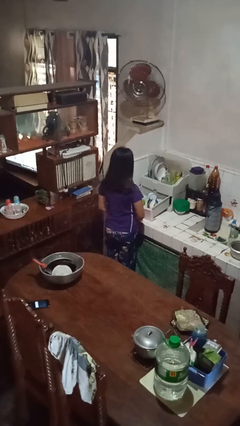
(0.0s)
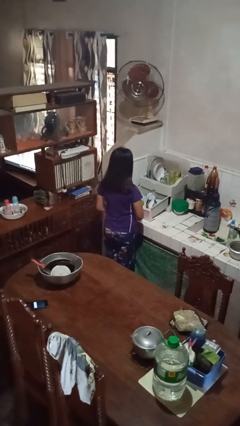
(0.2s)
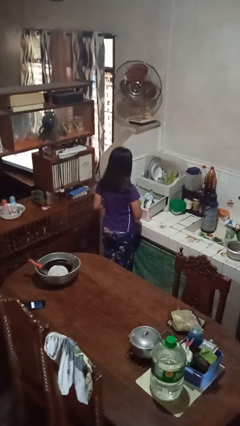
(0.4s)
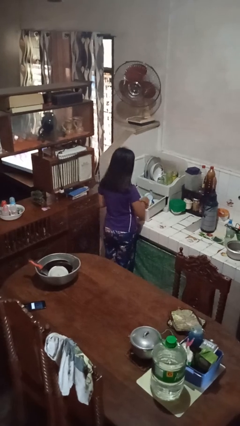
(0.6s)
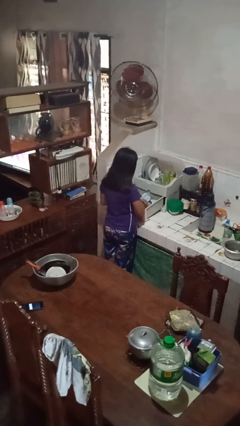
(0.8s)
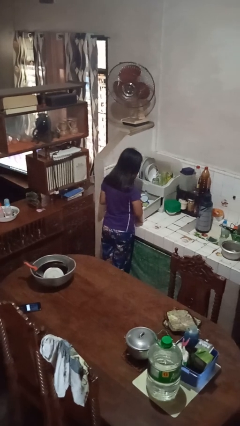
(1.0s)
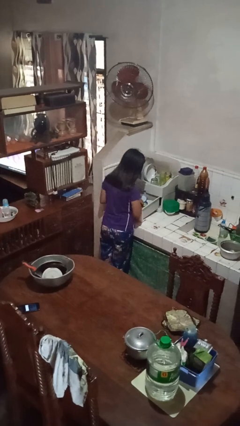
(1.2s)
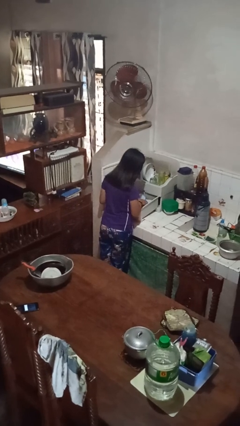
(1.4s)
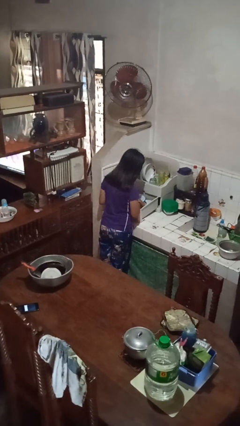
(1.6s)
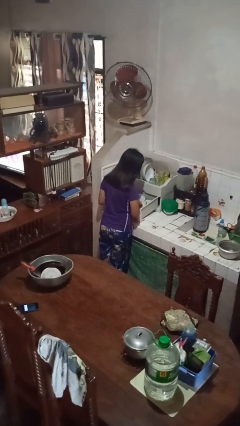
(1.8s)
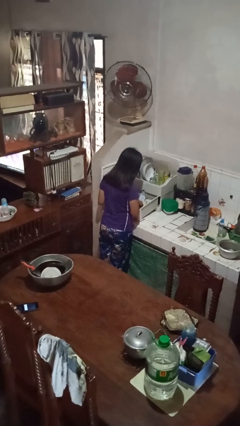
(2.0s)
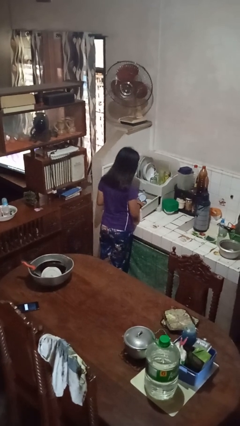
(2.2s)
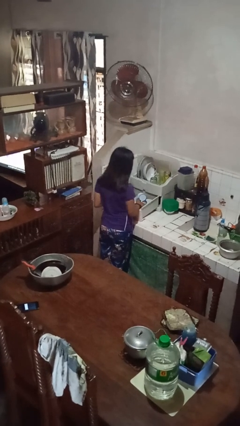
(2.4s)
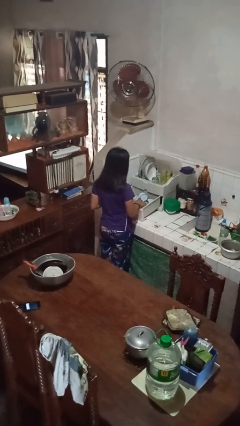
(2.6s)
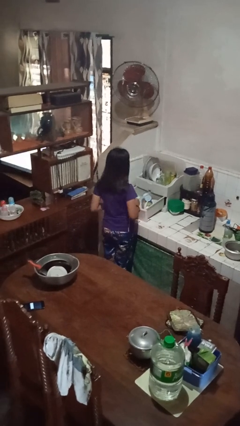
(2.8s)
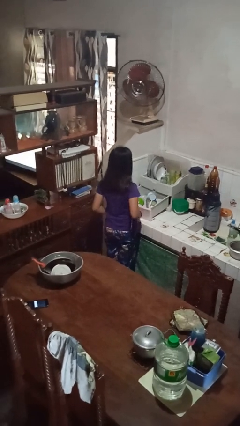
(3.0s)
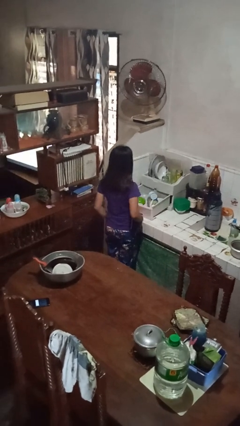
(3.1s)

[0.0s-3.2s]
person searches in kitchen drawer

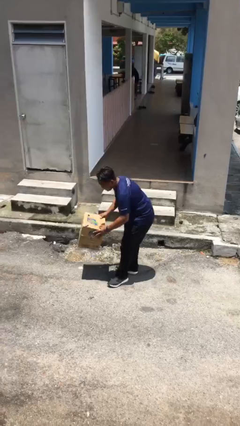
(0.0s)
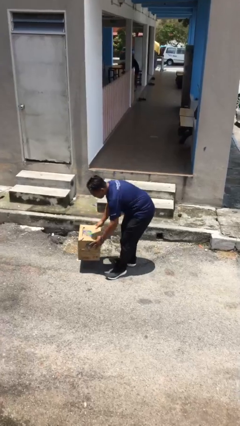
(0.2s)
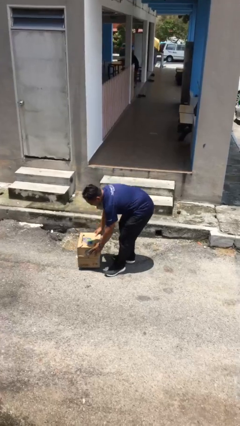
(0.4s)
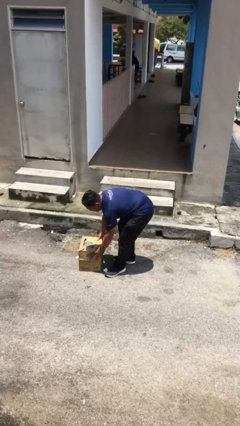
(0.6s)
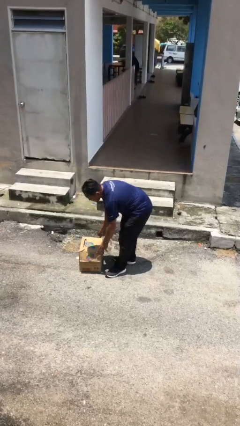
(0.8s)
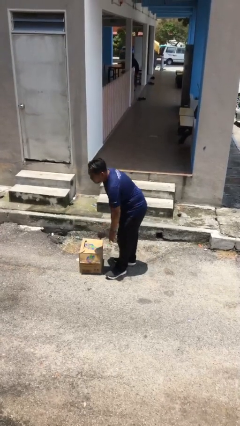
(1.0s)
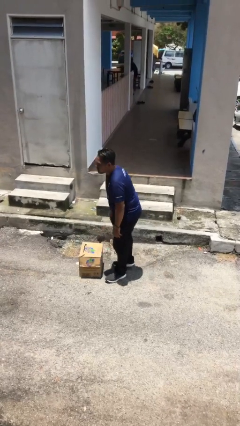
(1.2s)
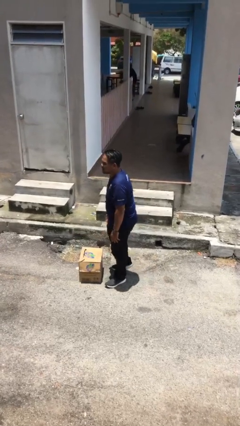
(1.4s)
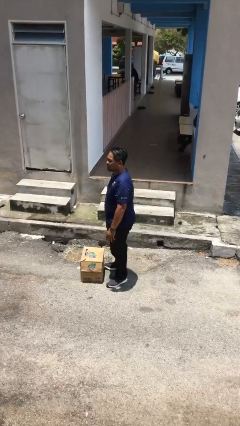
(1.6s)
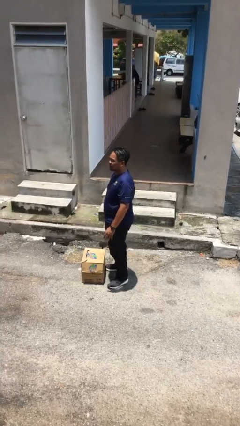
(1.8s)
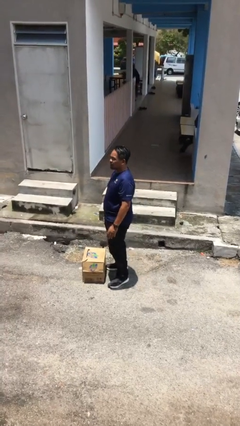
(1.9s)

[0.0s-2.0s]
person puts down object on floor

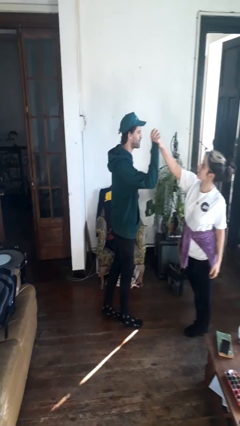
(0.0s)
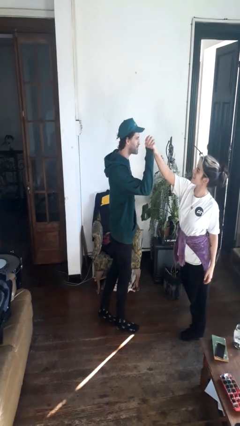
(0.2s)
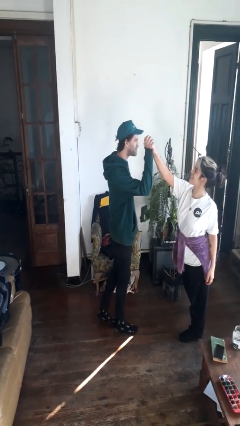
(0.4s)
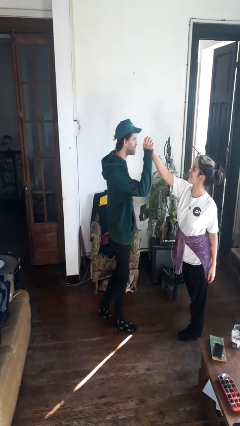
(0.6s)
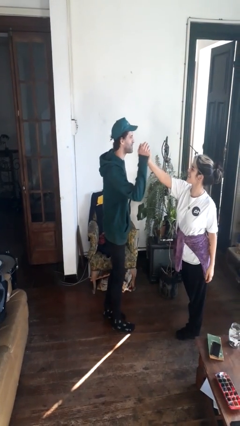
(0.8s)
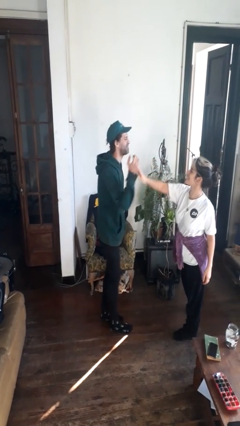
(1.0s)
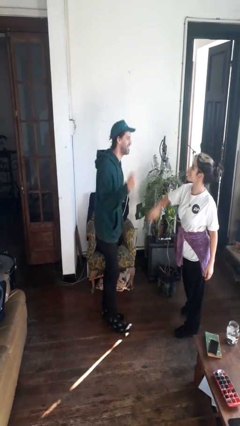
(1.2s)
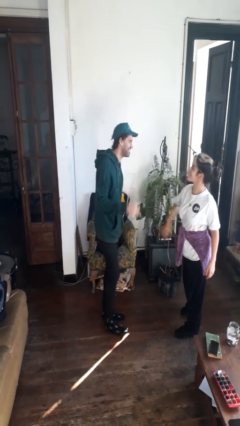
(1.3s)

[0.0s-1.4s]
person highfives hand

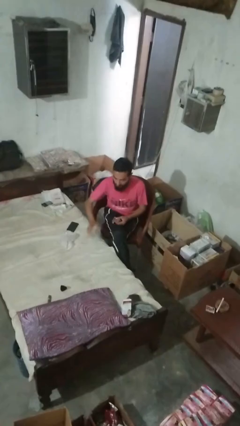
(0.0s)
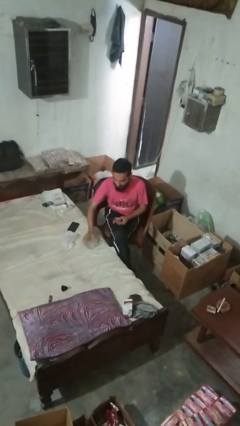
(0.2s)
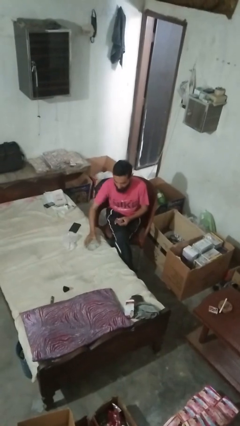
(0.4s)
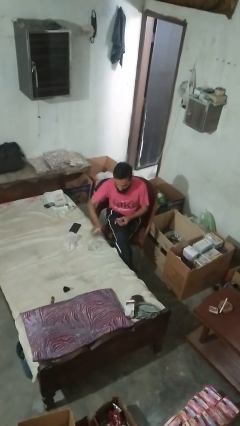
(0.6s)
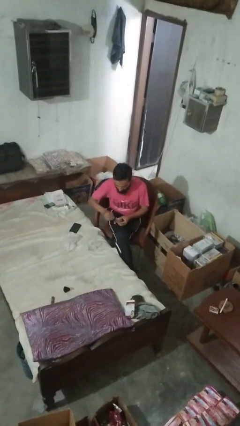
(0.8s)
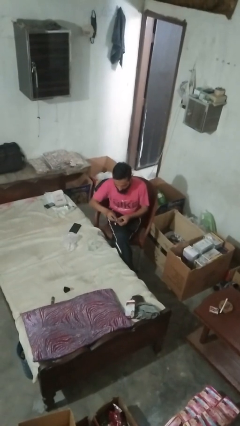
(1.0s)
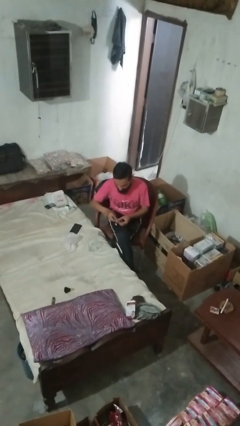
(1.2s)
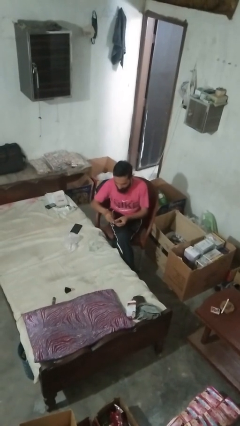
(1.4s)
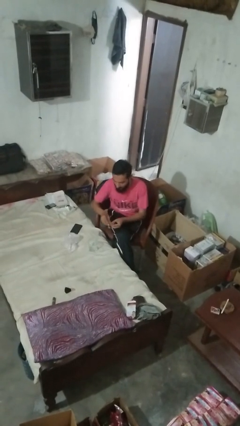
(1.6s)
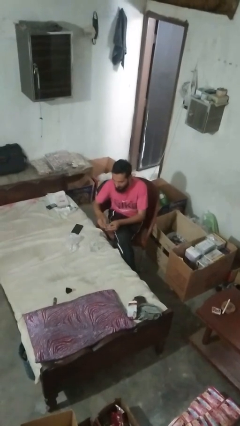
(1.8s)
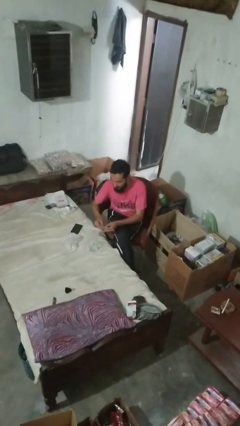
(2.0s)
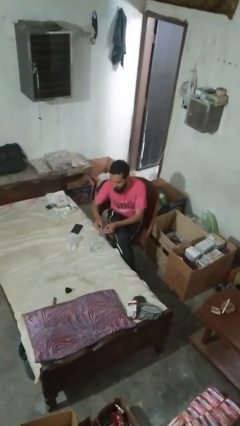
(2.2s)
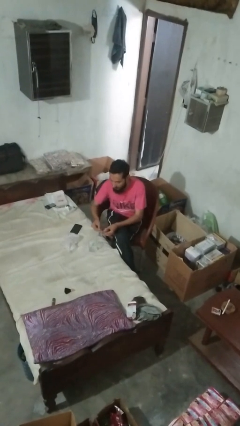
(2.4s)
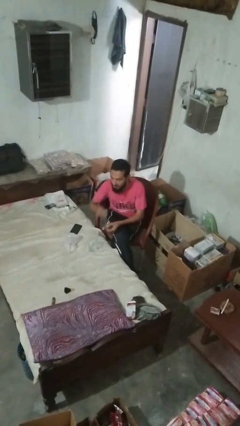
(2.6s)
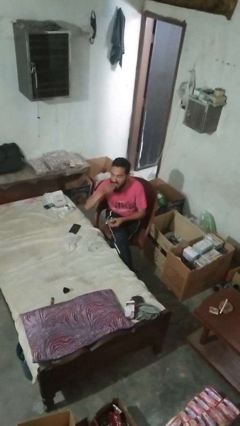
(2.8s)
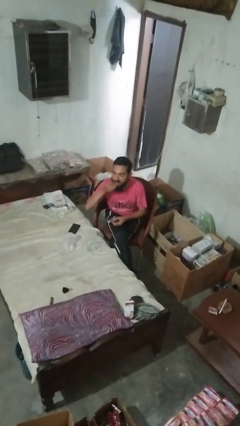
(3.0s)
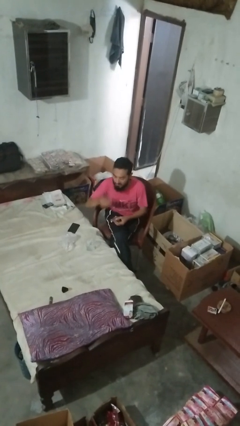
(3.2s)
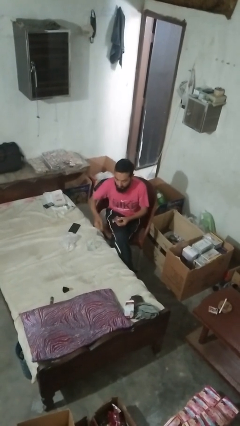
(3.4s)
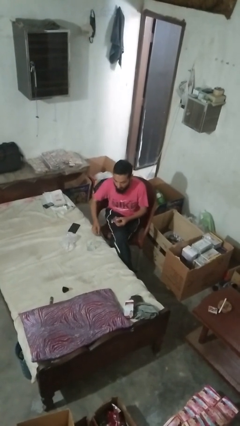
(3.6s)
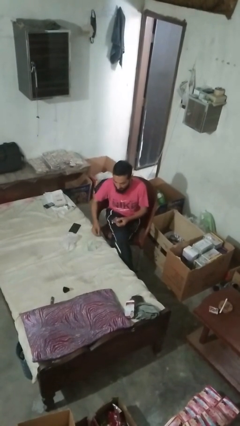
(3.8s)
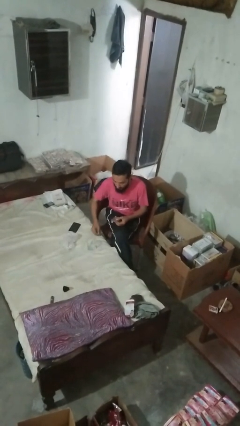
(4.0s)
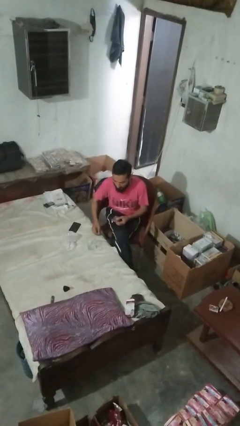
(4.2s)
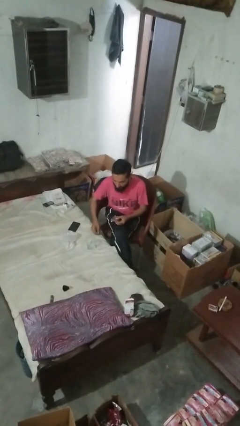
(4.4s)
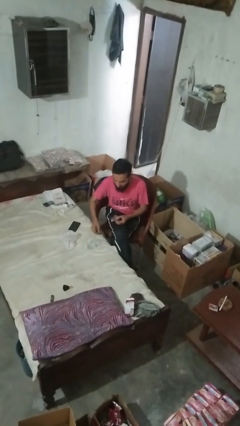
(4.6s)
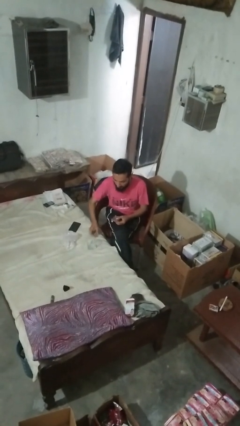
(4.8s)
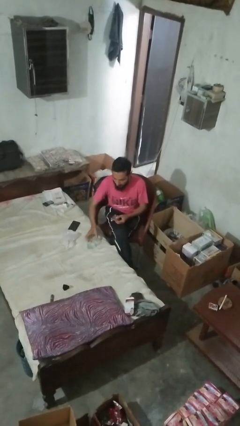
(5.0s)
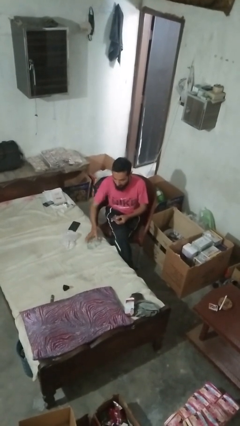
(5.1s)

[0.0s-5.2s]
person takes medicine pills

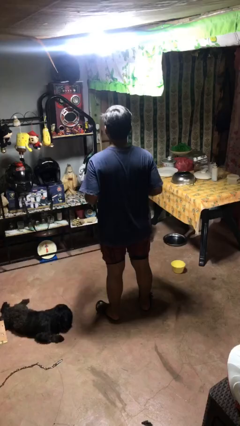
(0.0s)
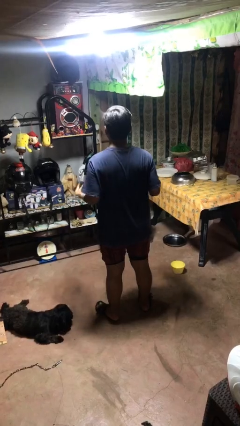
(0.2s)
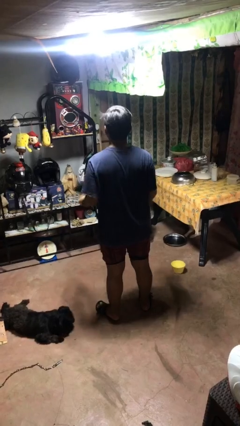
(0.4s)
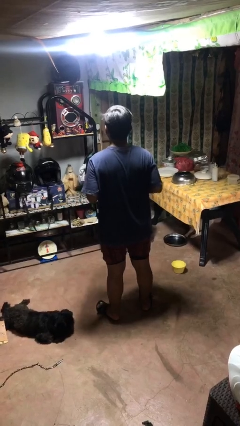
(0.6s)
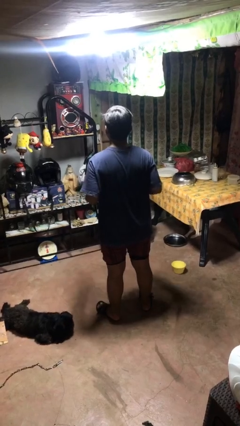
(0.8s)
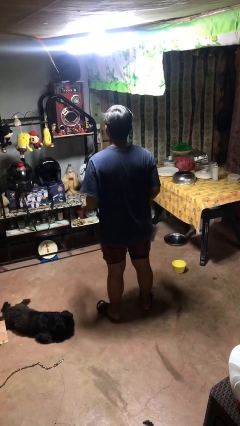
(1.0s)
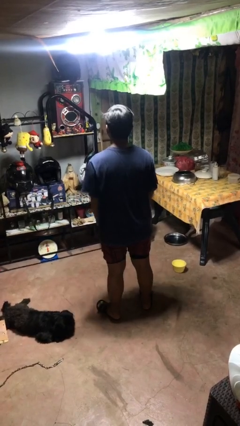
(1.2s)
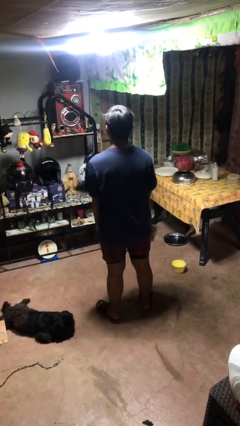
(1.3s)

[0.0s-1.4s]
person snaps fingers

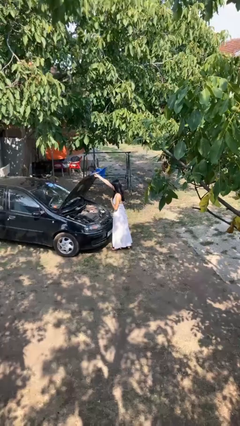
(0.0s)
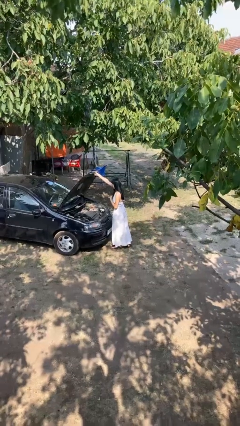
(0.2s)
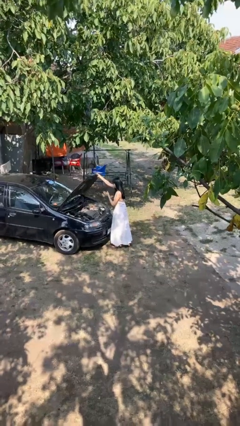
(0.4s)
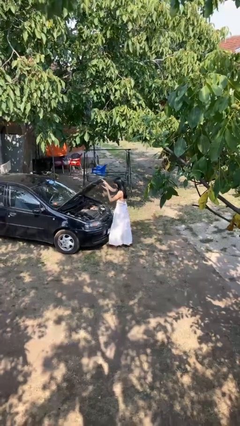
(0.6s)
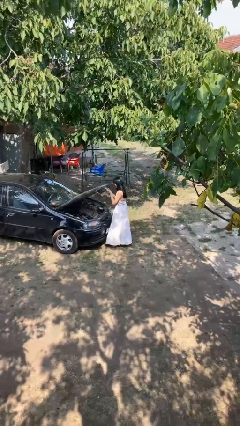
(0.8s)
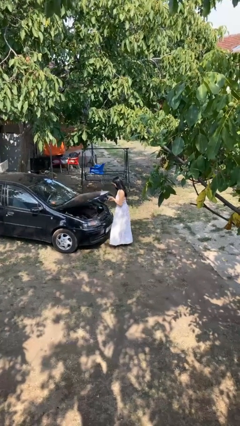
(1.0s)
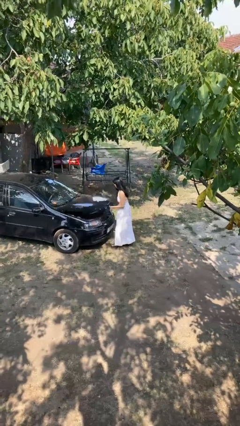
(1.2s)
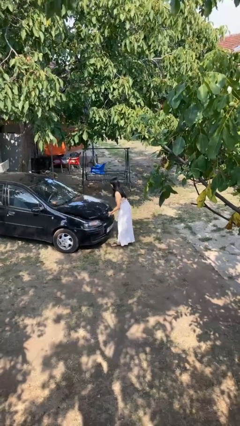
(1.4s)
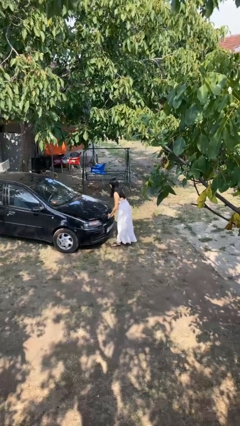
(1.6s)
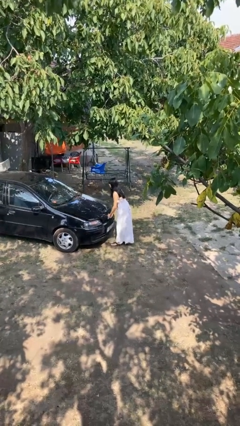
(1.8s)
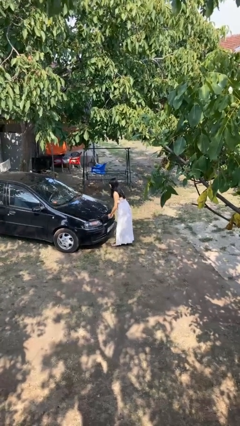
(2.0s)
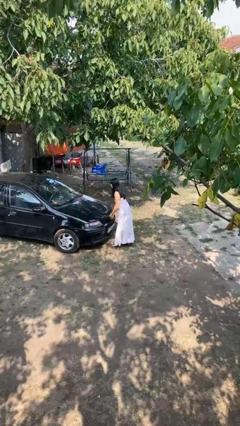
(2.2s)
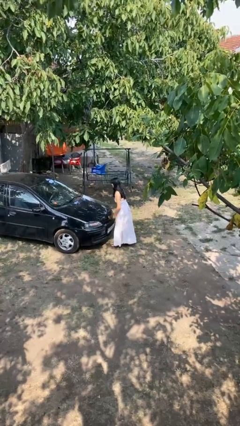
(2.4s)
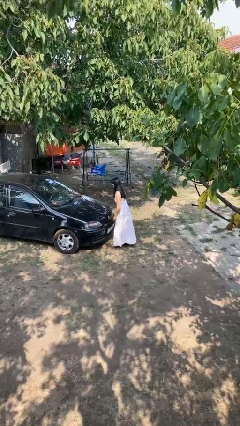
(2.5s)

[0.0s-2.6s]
person closes car hood

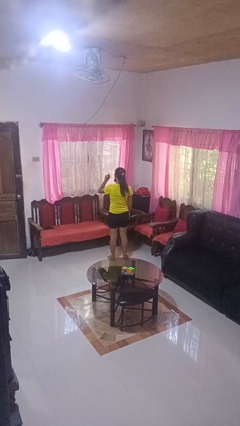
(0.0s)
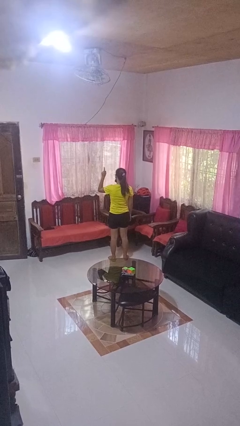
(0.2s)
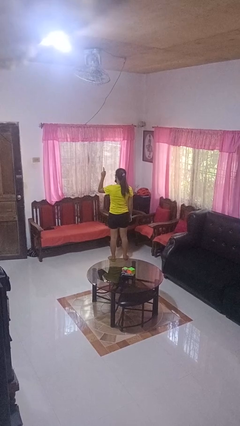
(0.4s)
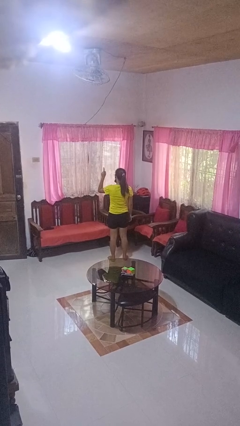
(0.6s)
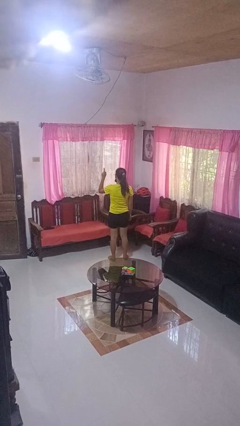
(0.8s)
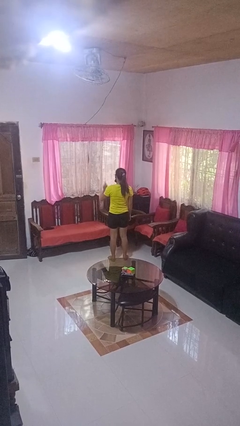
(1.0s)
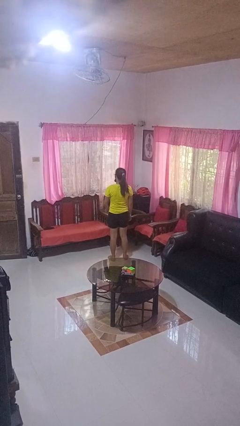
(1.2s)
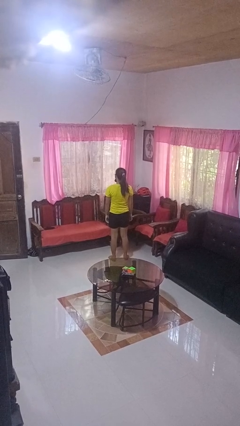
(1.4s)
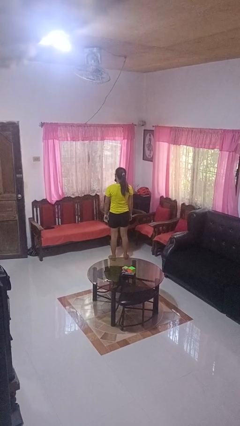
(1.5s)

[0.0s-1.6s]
person gestures number one
